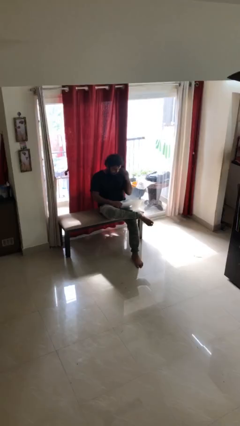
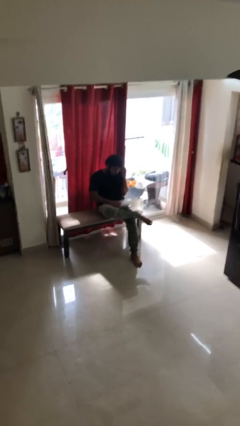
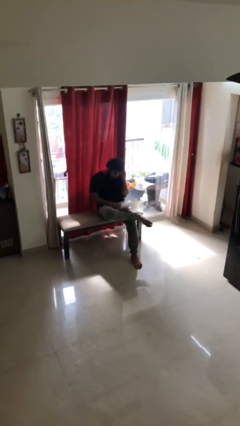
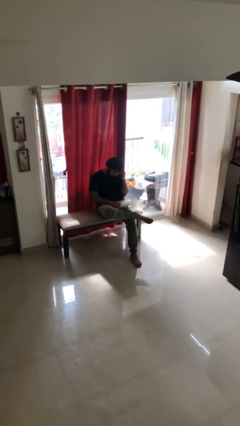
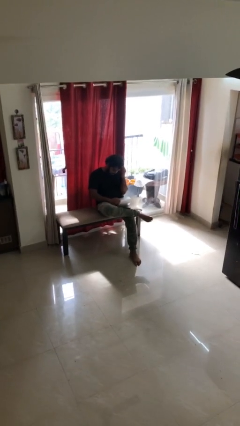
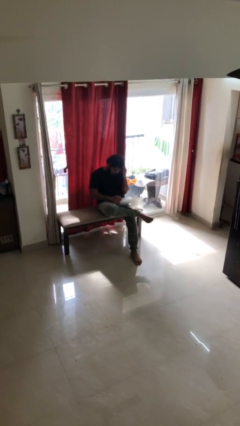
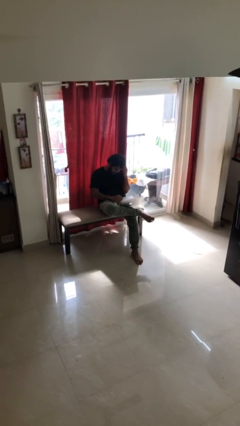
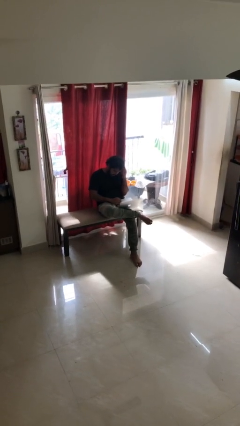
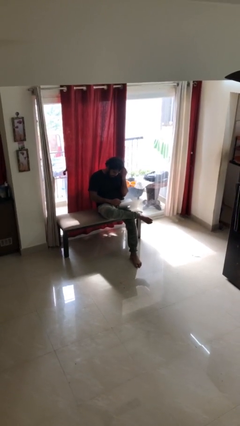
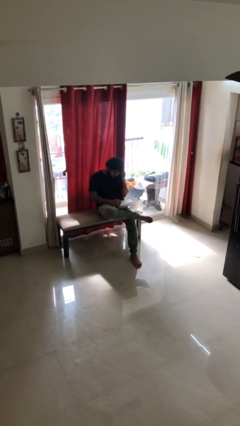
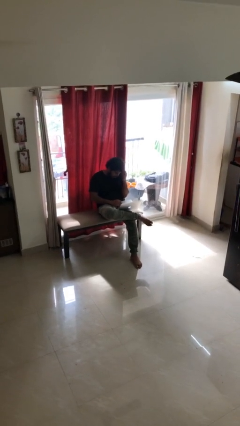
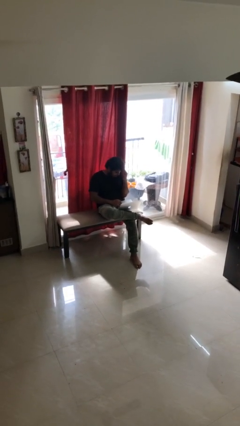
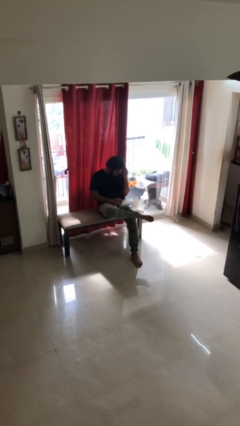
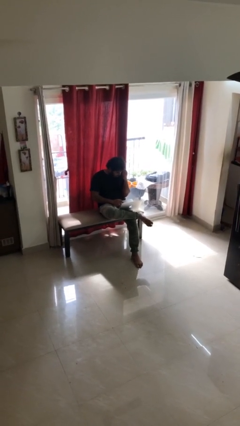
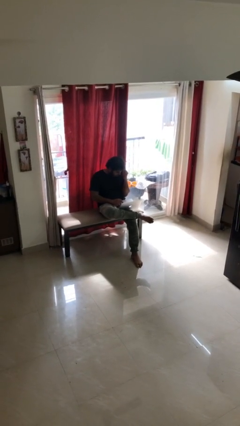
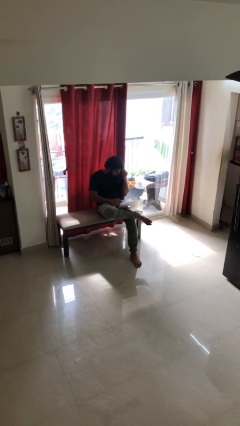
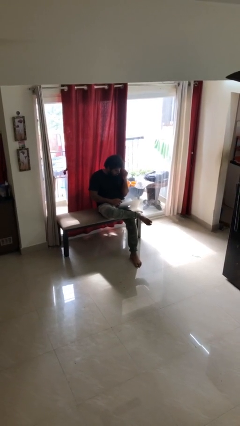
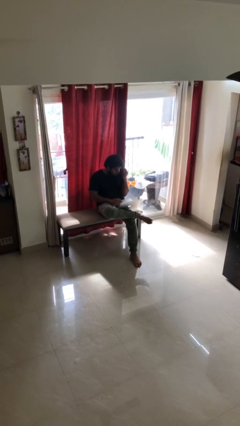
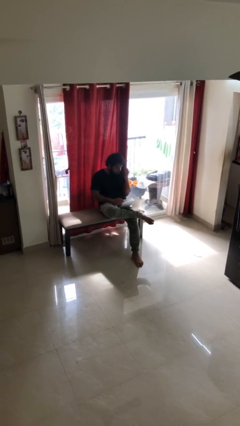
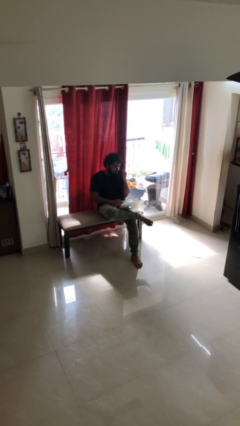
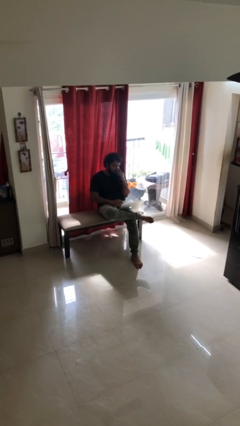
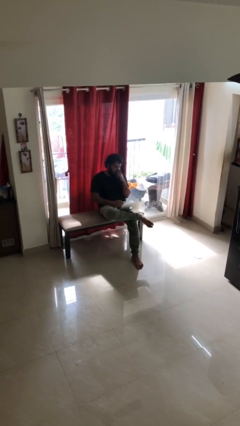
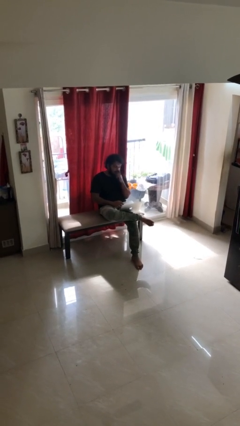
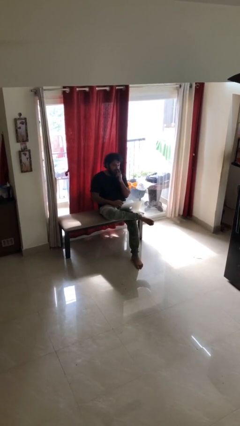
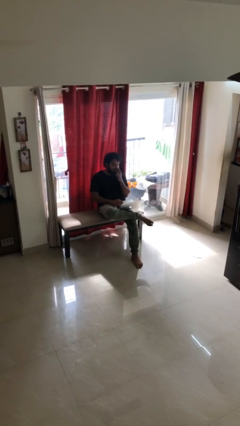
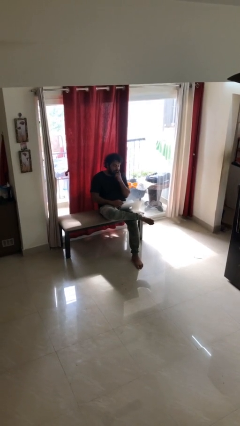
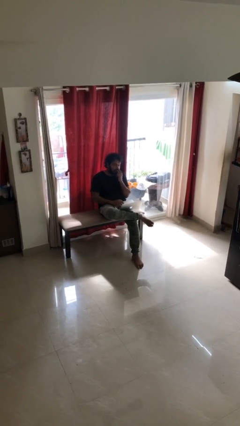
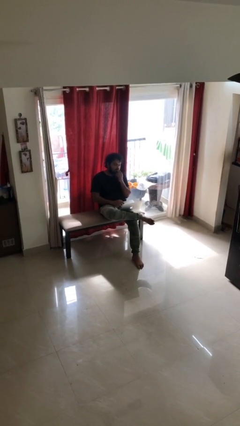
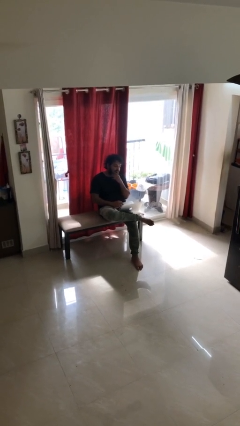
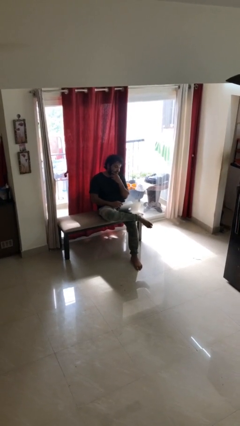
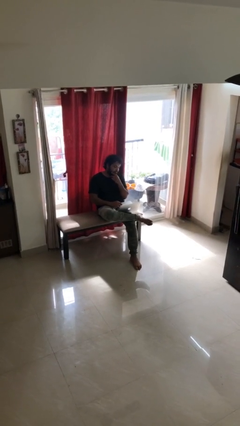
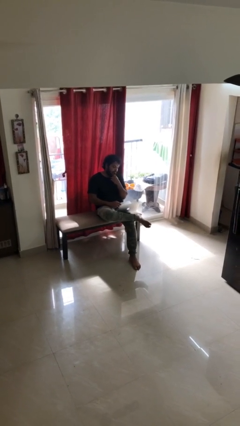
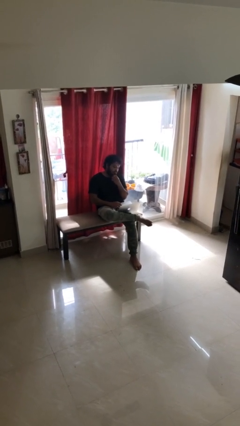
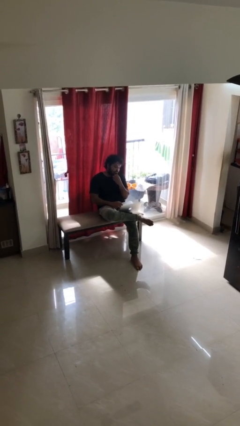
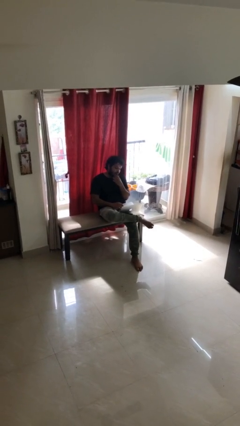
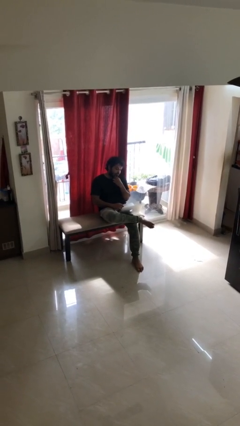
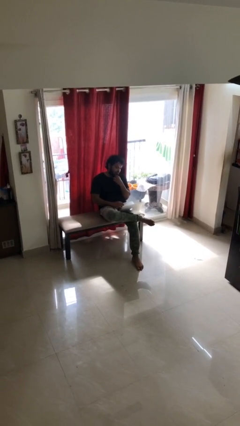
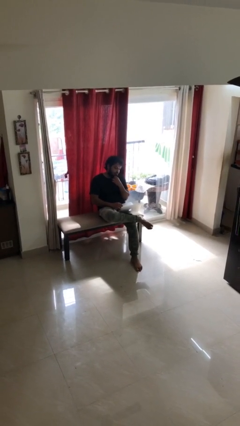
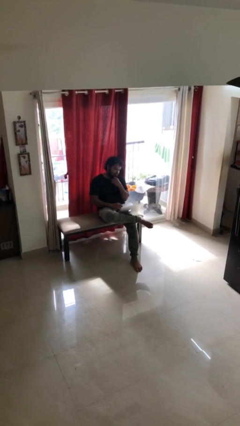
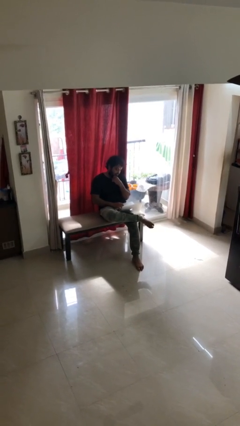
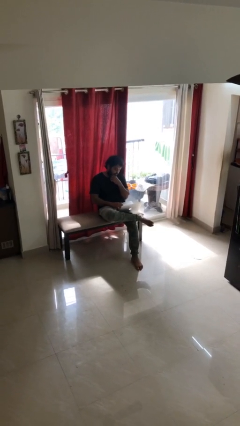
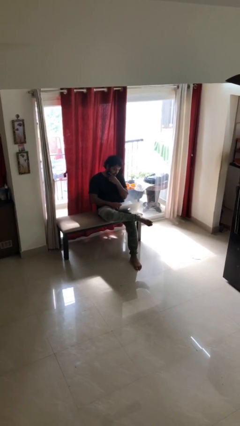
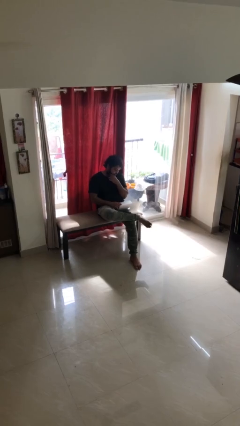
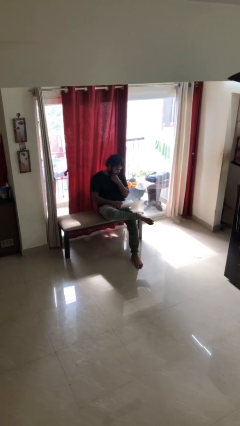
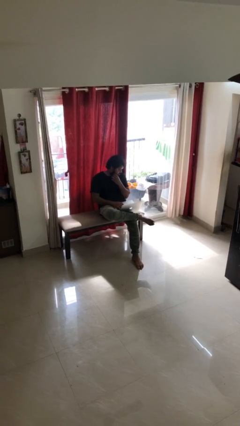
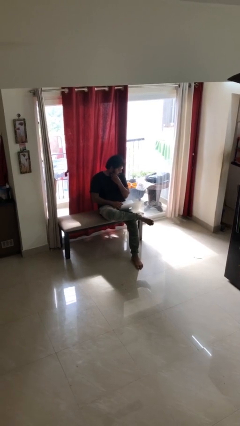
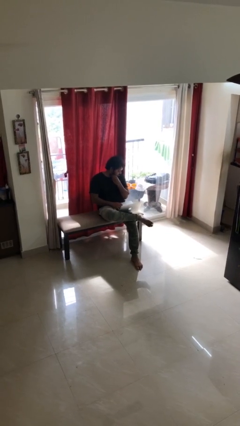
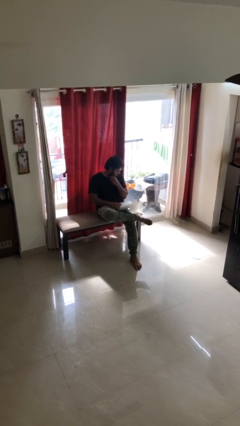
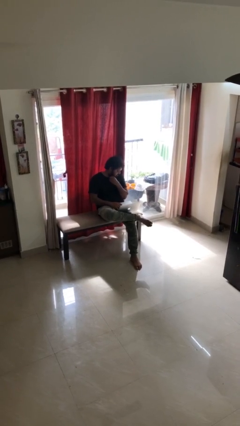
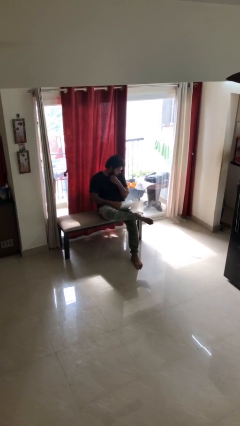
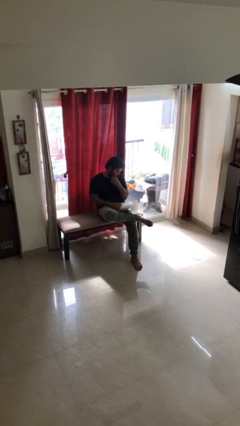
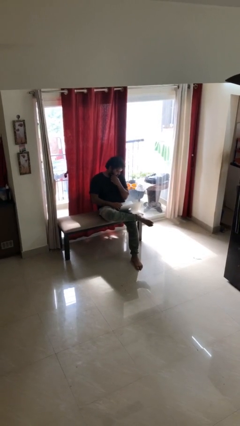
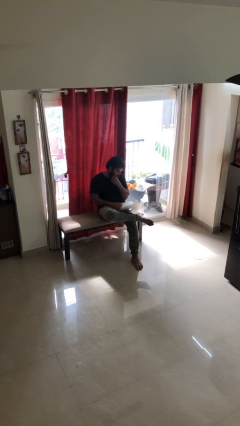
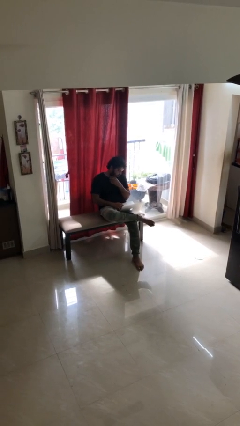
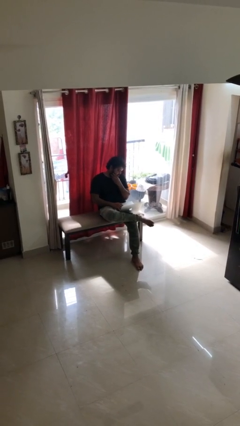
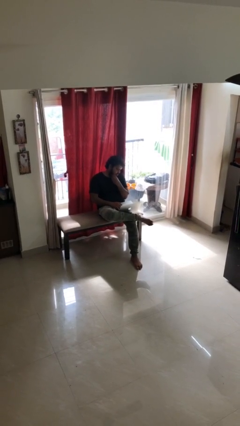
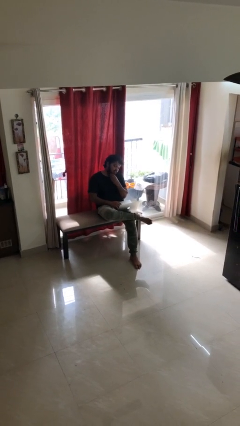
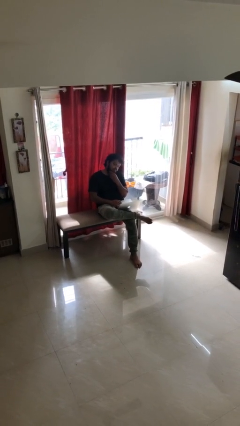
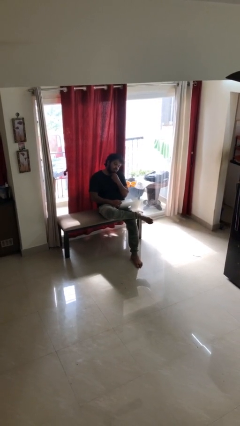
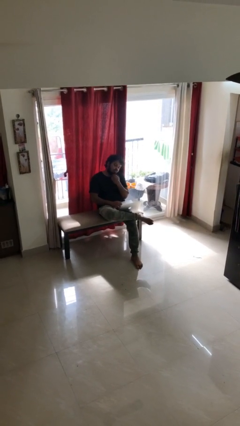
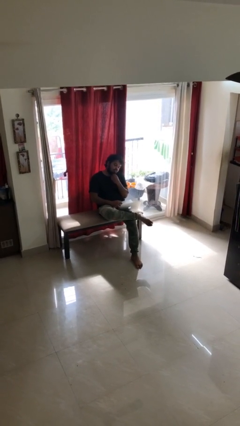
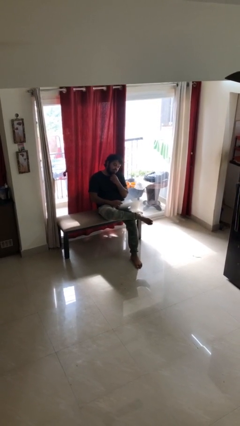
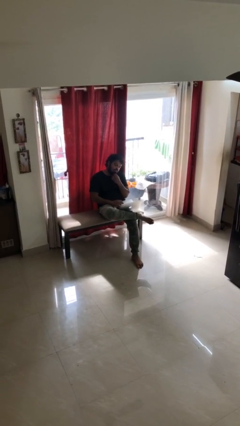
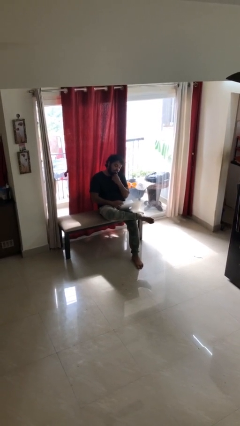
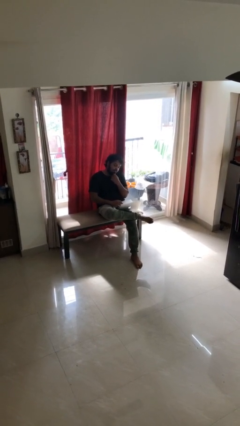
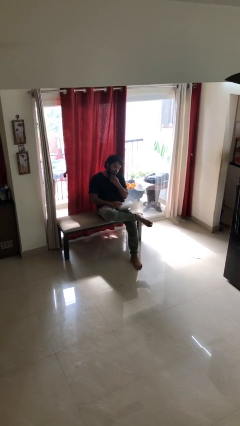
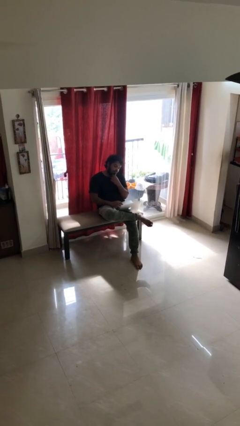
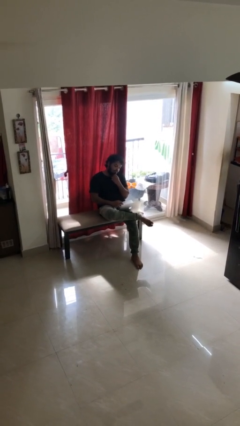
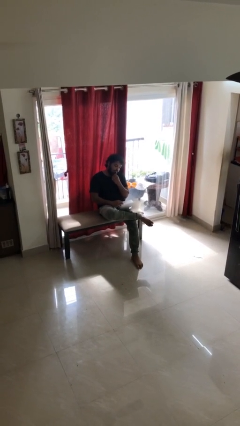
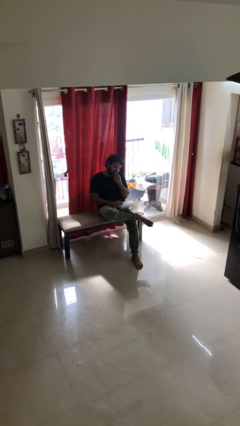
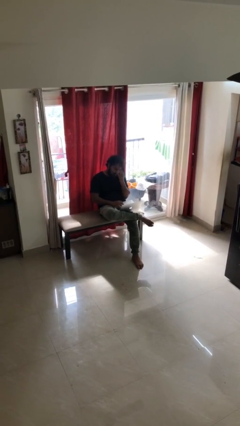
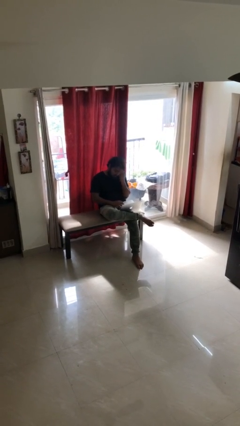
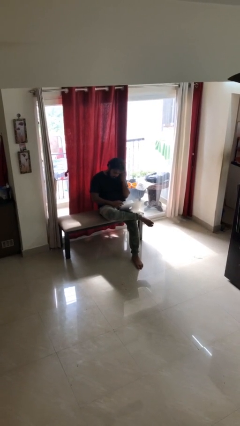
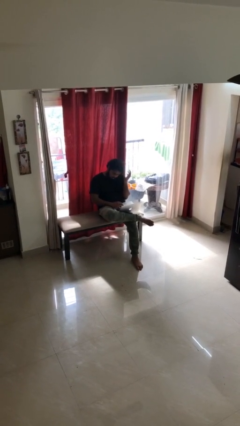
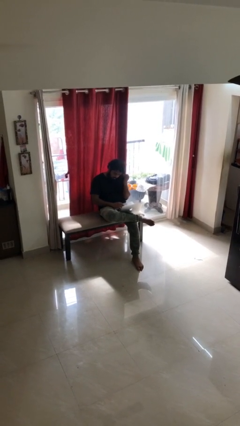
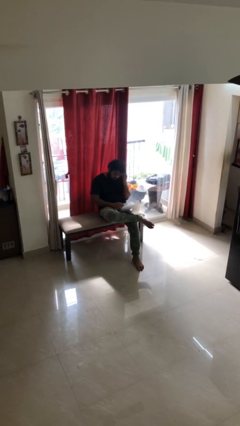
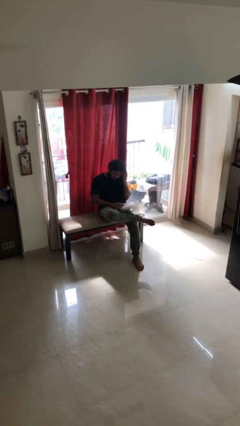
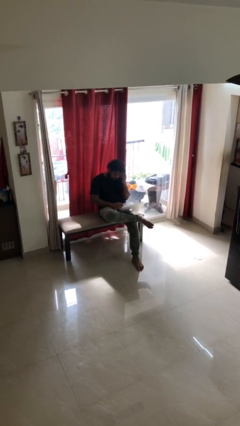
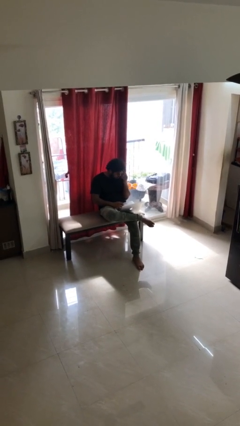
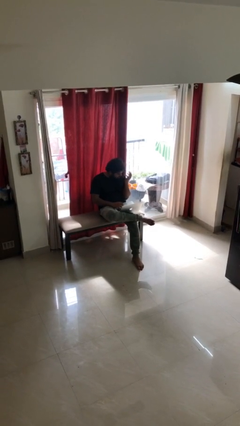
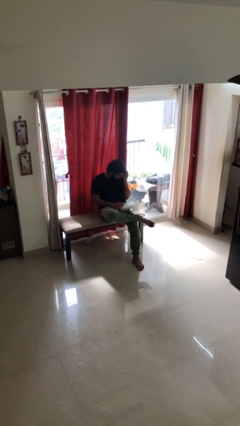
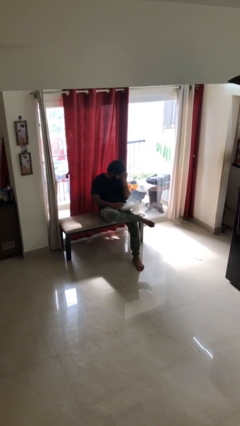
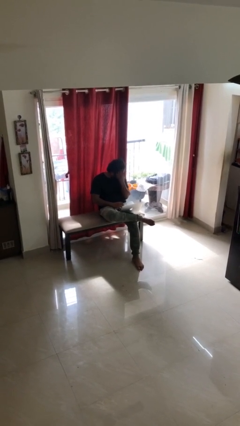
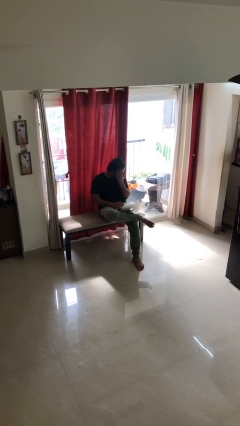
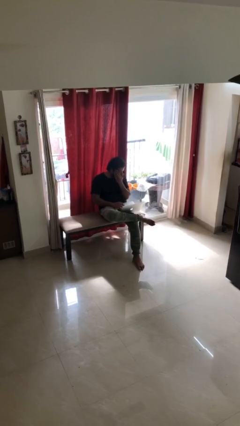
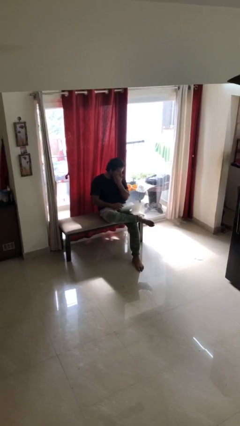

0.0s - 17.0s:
person interacts with laptop

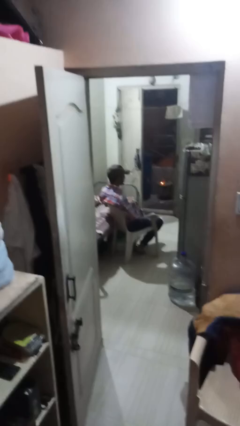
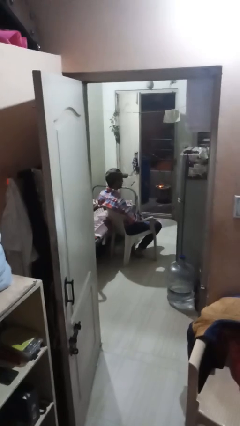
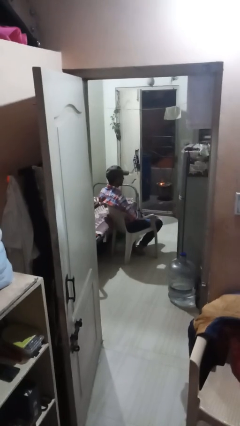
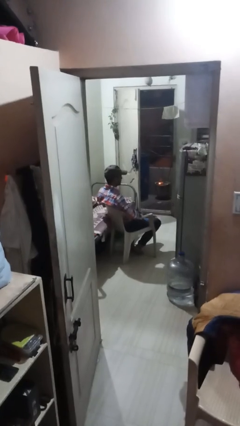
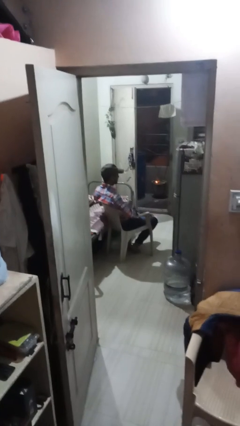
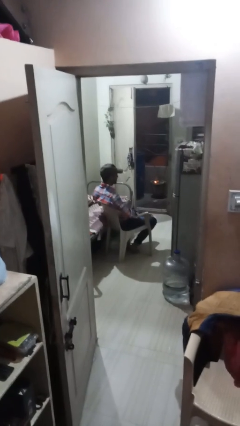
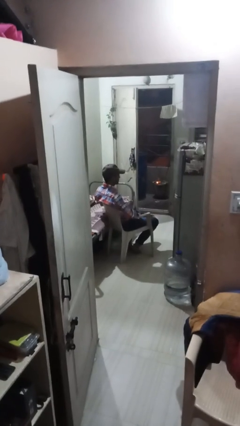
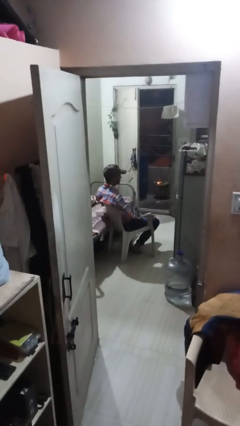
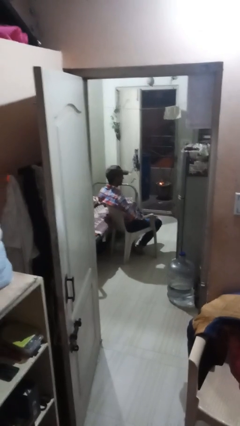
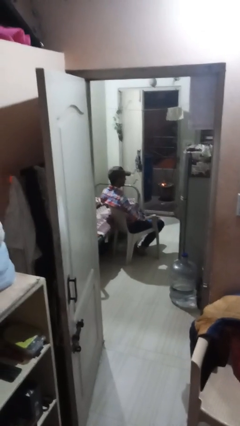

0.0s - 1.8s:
person snaps fingers
